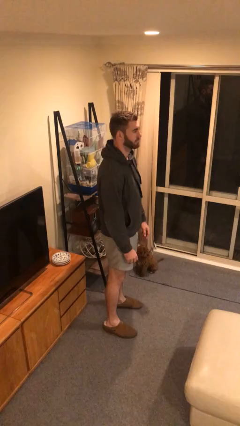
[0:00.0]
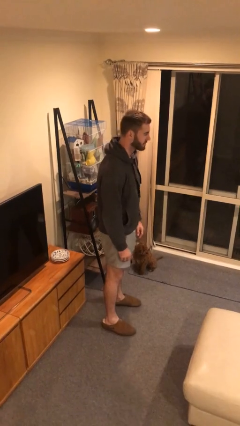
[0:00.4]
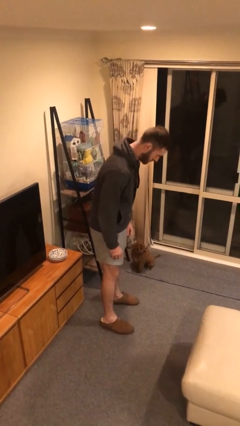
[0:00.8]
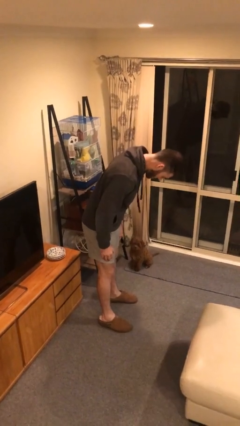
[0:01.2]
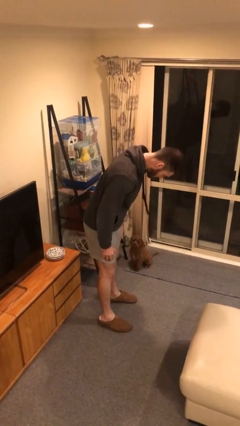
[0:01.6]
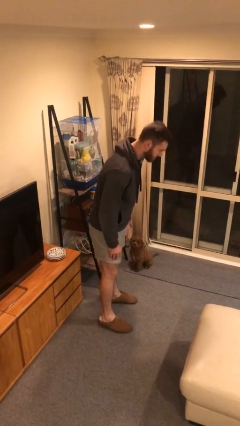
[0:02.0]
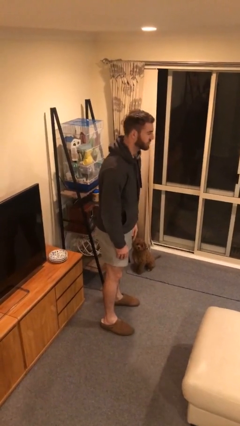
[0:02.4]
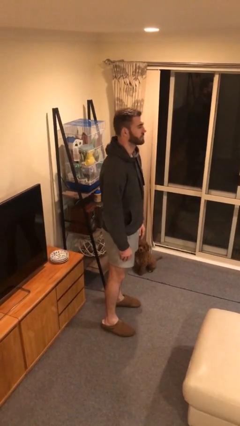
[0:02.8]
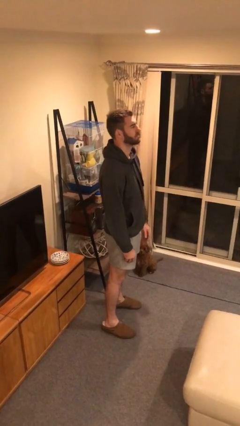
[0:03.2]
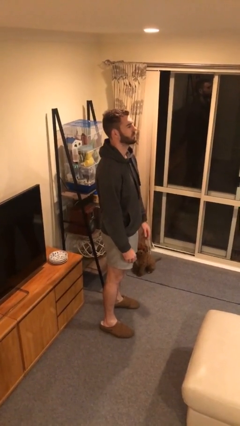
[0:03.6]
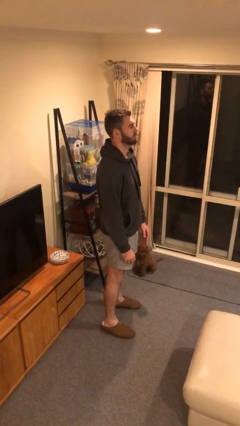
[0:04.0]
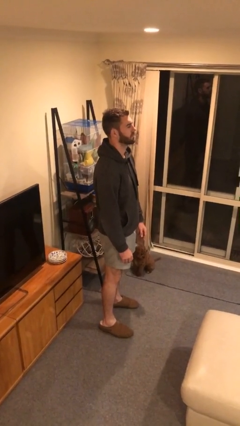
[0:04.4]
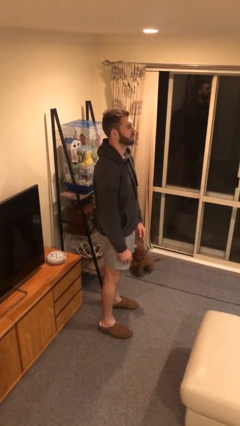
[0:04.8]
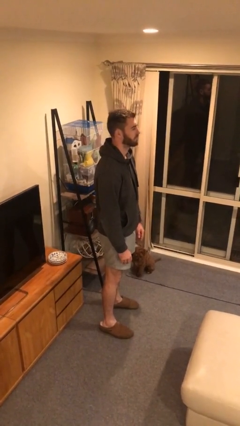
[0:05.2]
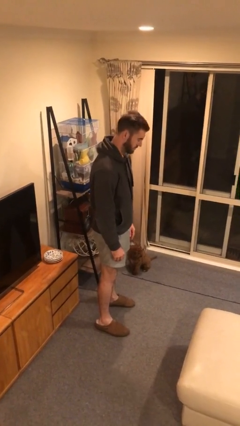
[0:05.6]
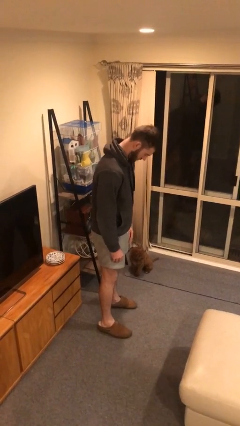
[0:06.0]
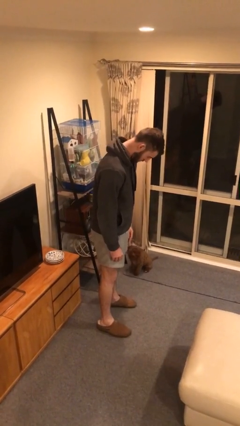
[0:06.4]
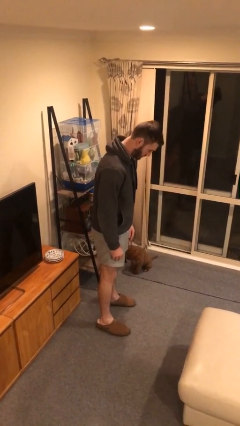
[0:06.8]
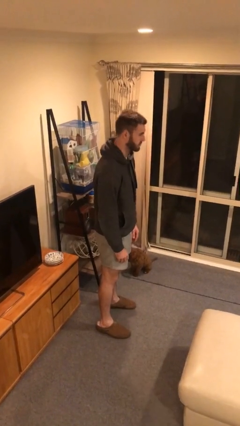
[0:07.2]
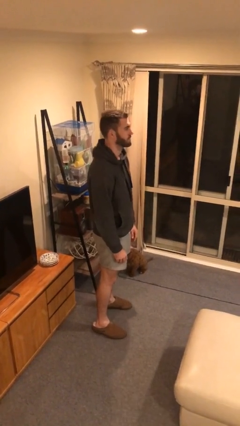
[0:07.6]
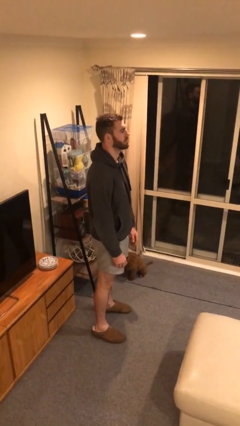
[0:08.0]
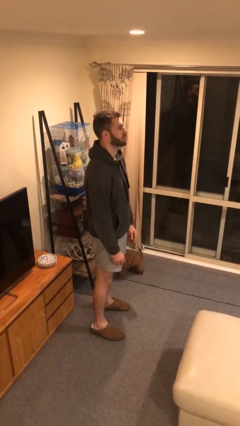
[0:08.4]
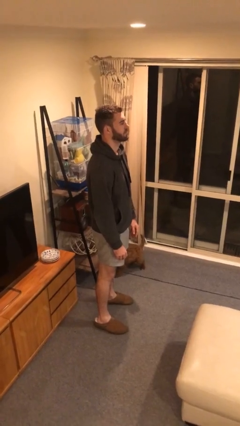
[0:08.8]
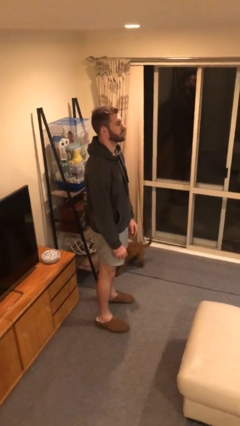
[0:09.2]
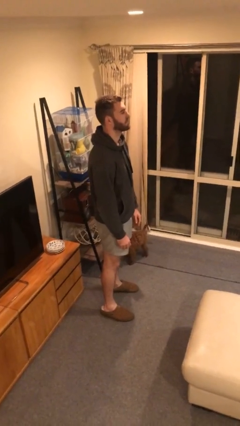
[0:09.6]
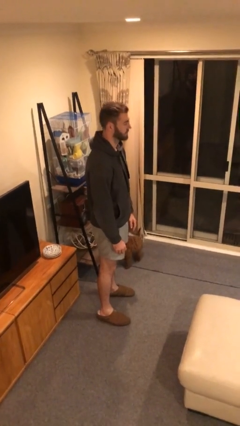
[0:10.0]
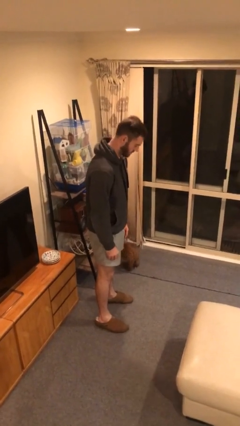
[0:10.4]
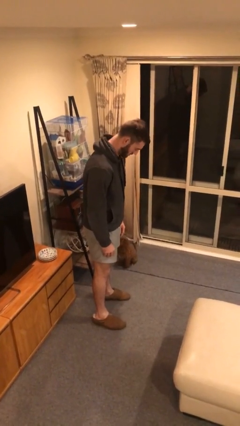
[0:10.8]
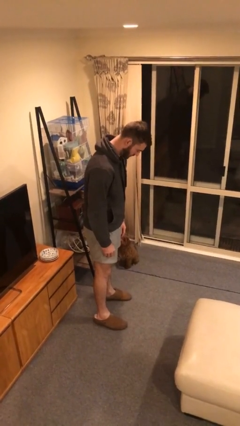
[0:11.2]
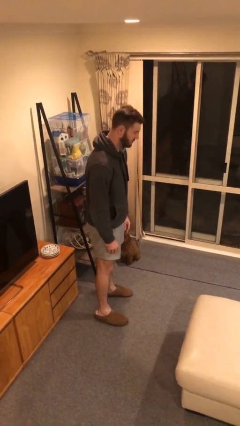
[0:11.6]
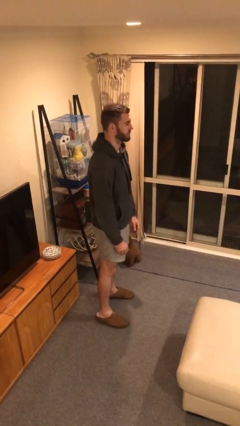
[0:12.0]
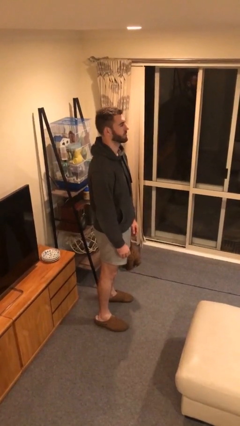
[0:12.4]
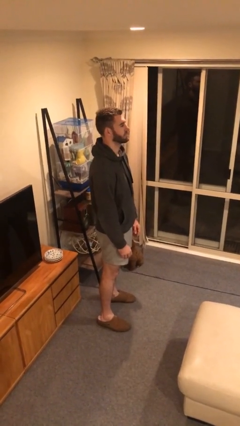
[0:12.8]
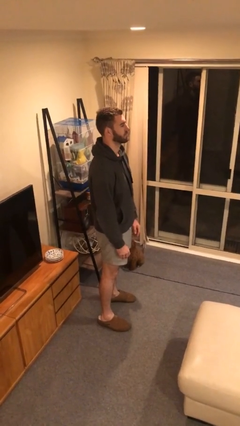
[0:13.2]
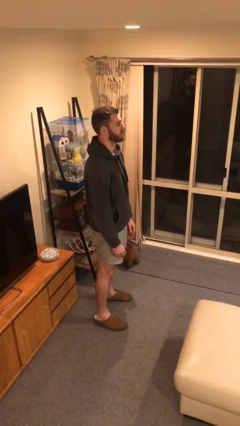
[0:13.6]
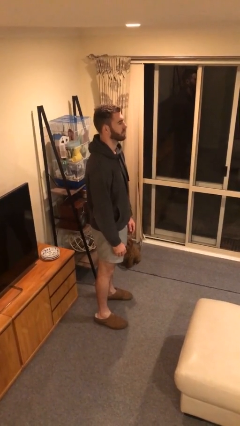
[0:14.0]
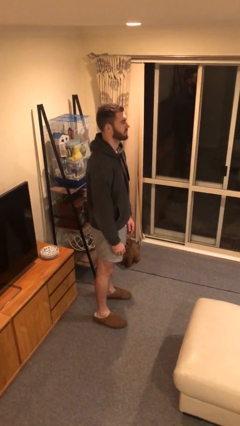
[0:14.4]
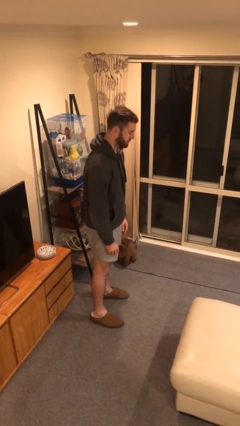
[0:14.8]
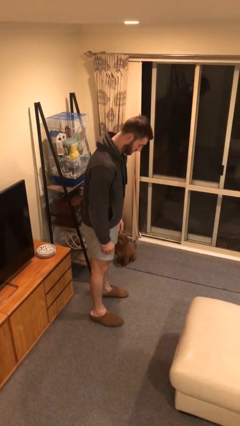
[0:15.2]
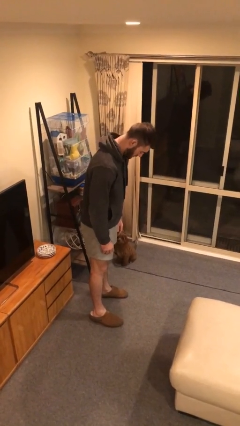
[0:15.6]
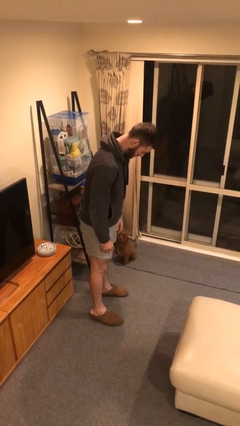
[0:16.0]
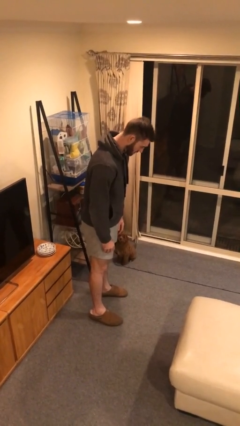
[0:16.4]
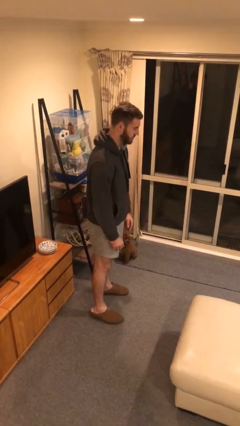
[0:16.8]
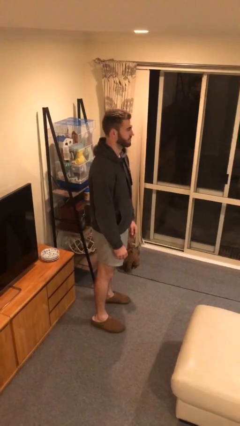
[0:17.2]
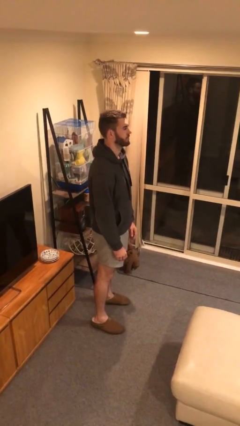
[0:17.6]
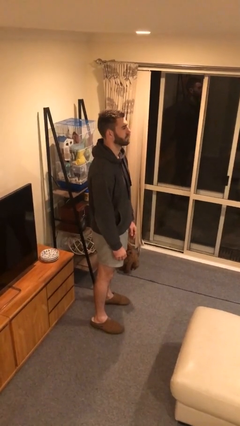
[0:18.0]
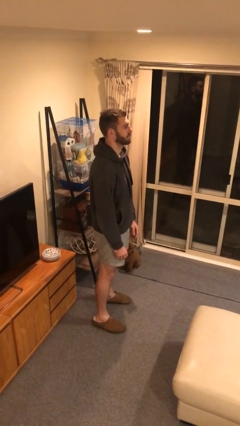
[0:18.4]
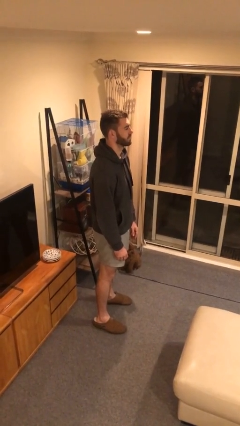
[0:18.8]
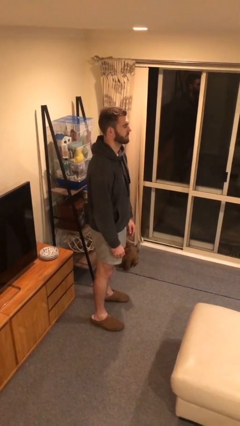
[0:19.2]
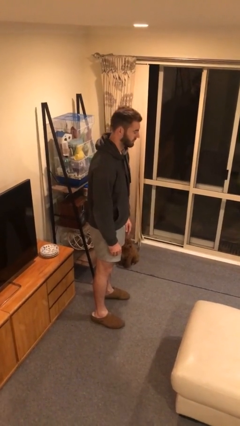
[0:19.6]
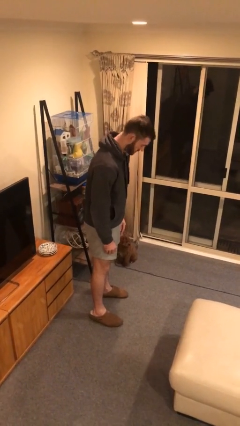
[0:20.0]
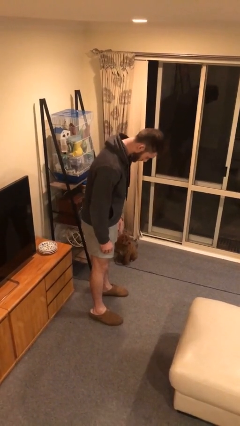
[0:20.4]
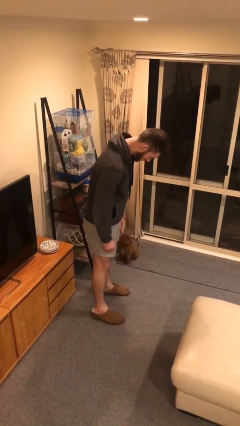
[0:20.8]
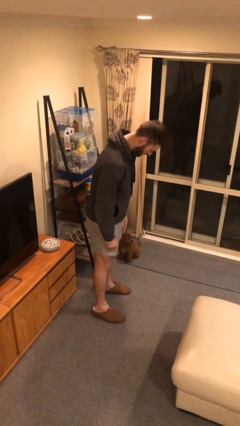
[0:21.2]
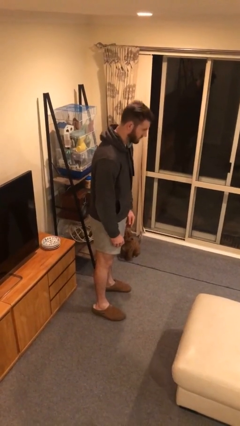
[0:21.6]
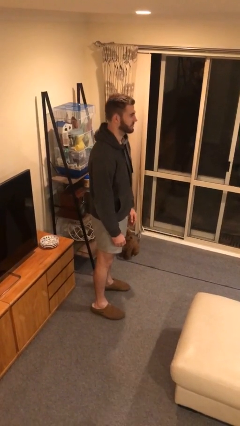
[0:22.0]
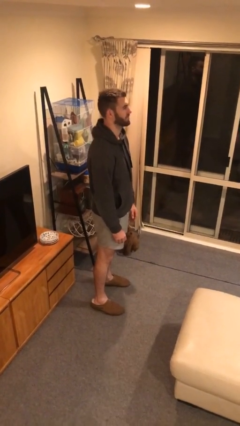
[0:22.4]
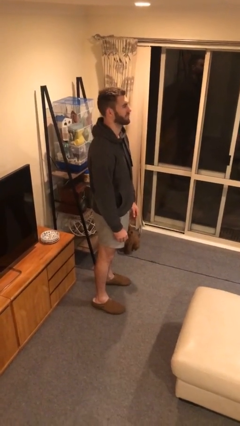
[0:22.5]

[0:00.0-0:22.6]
person bows

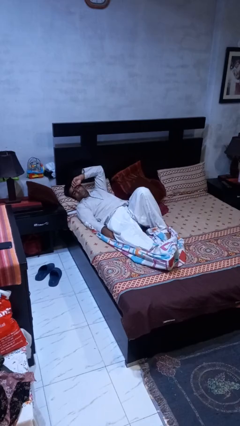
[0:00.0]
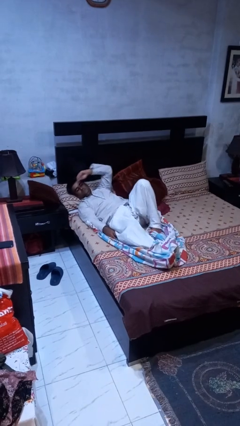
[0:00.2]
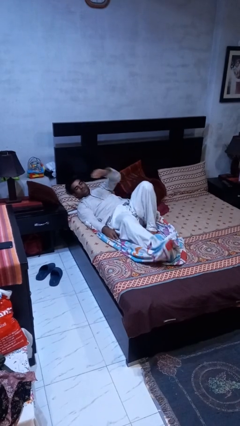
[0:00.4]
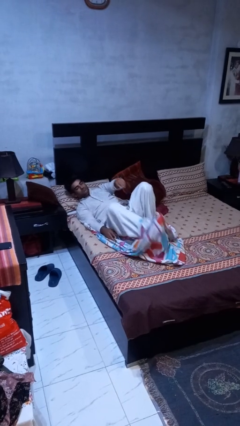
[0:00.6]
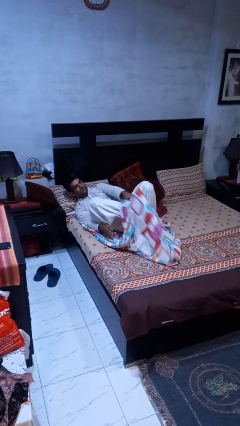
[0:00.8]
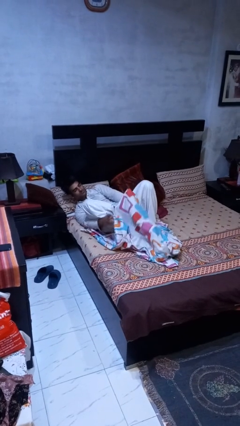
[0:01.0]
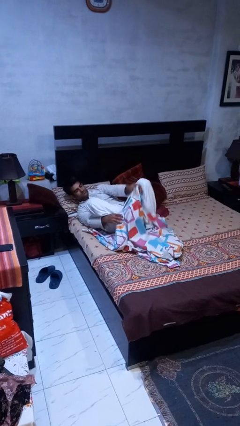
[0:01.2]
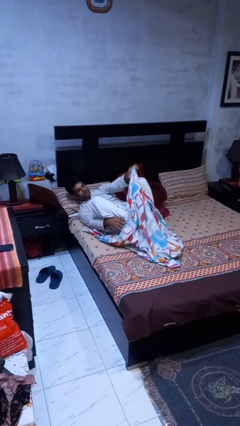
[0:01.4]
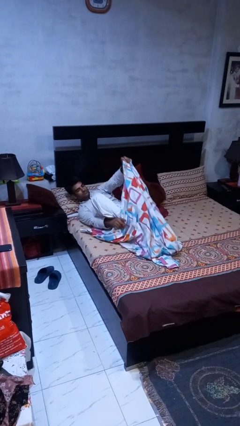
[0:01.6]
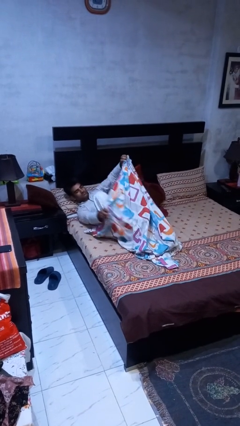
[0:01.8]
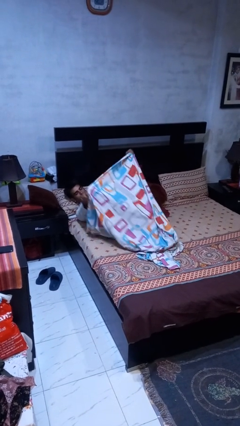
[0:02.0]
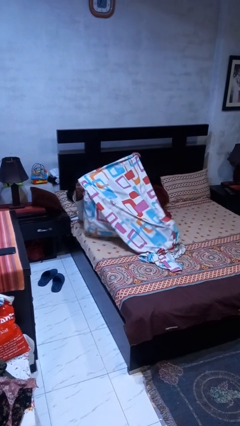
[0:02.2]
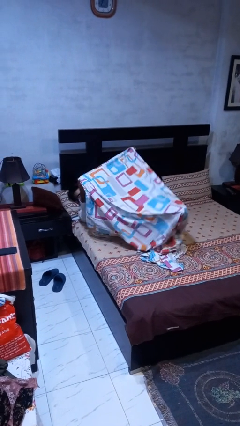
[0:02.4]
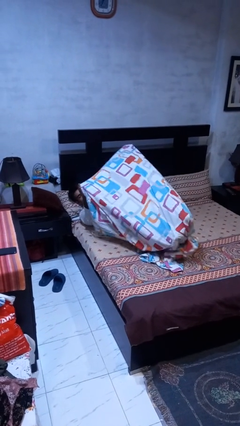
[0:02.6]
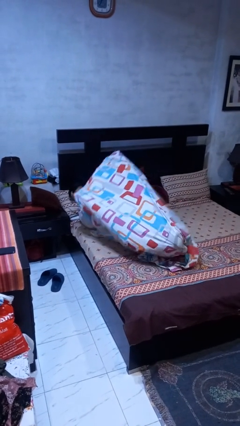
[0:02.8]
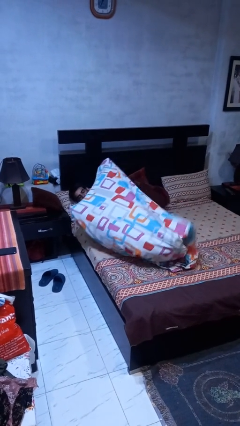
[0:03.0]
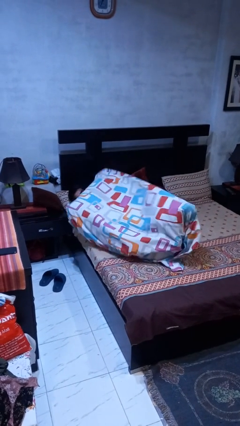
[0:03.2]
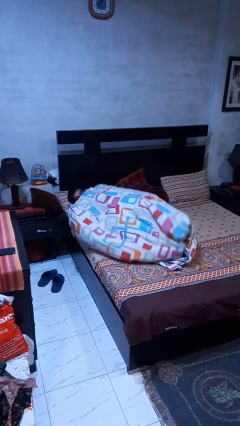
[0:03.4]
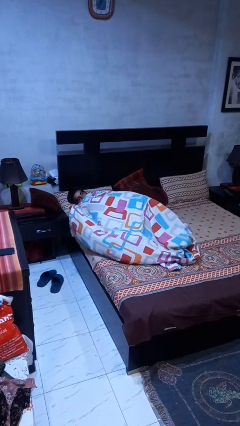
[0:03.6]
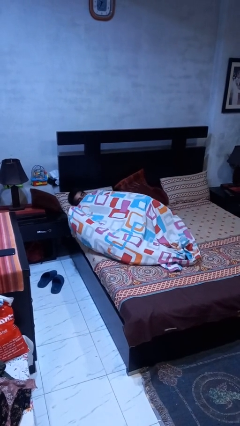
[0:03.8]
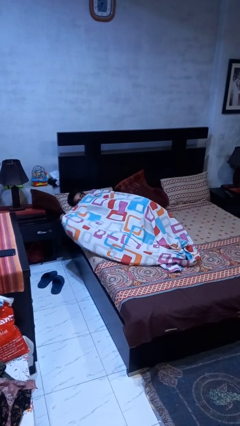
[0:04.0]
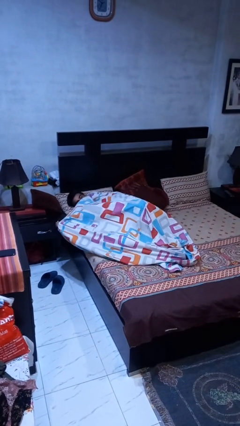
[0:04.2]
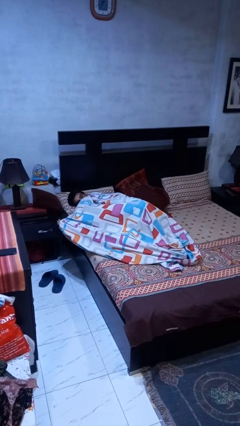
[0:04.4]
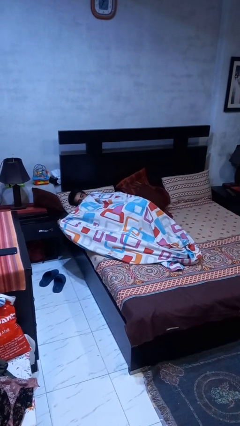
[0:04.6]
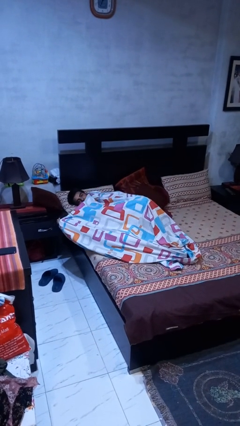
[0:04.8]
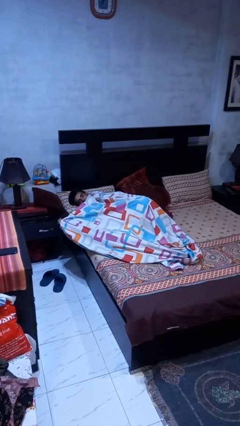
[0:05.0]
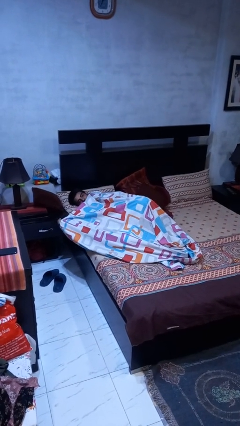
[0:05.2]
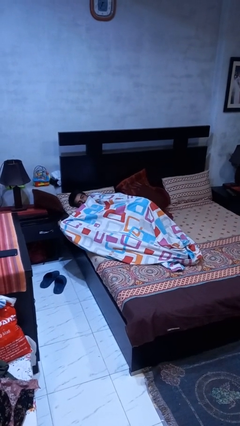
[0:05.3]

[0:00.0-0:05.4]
person covers with bedsheets

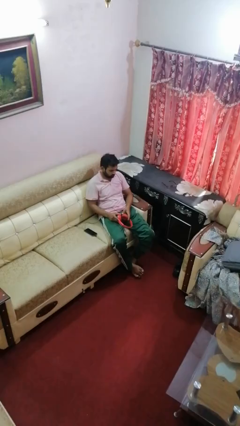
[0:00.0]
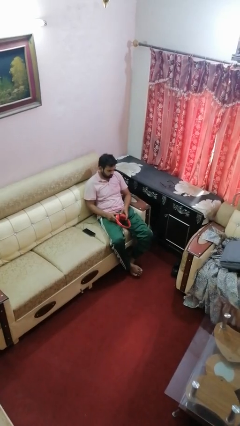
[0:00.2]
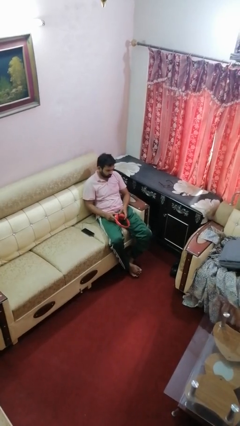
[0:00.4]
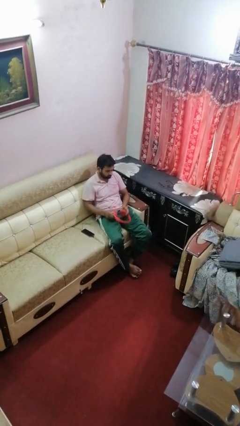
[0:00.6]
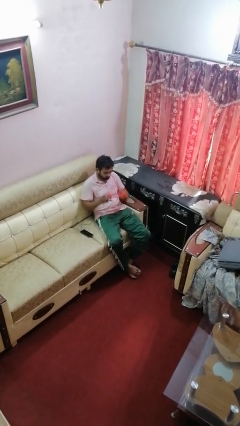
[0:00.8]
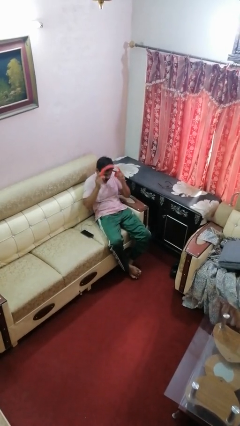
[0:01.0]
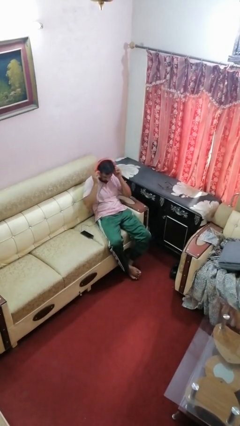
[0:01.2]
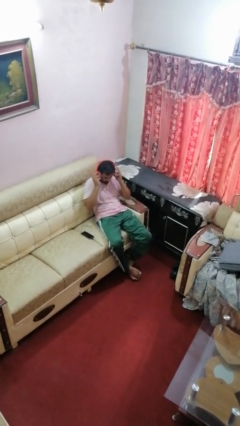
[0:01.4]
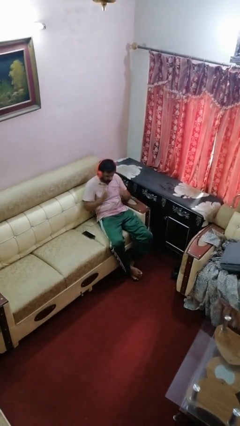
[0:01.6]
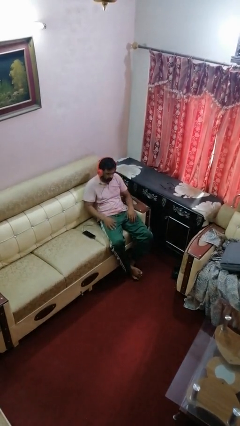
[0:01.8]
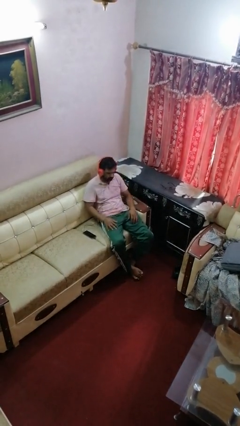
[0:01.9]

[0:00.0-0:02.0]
person puts on headphones
